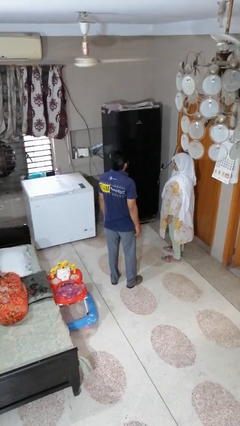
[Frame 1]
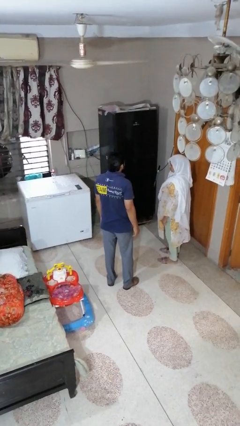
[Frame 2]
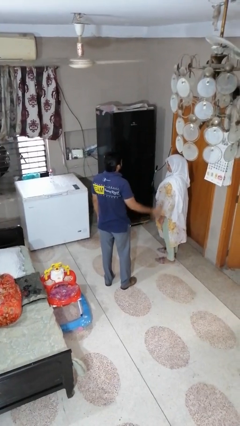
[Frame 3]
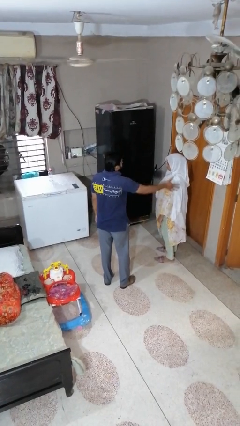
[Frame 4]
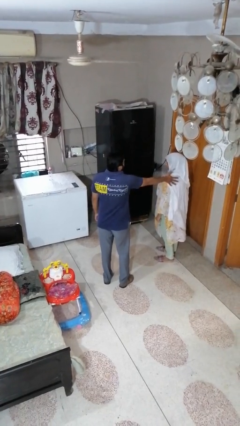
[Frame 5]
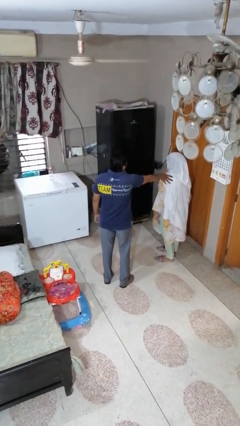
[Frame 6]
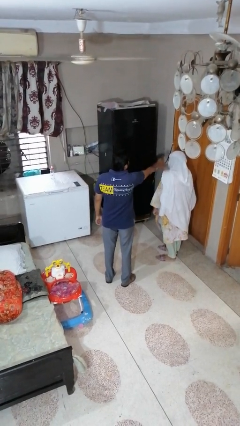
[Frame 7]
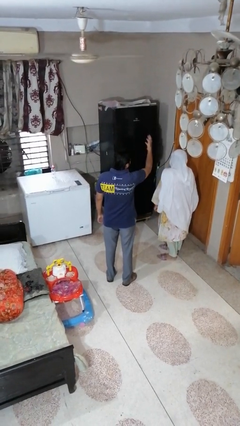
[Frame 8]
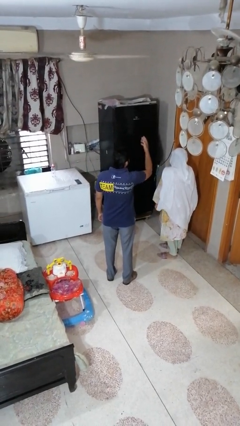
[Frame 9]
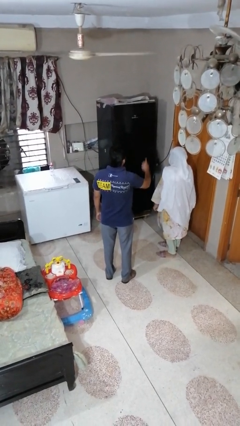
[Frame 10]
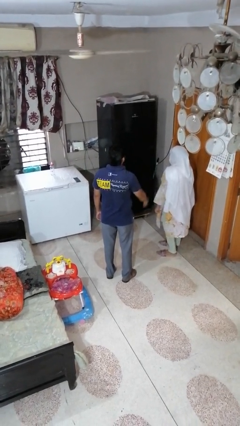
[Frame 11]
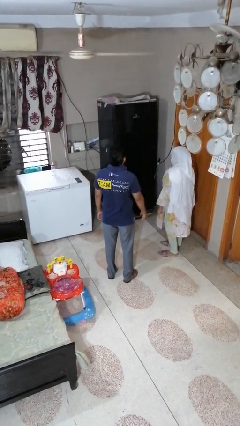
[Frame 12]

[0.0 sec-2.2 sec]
person shoves person

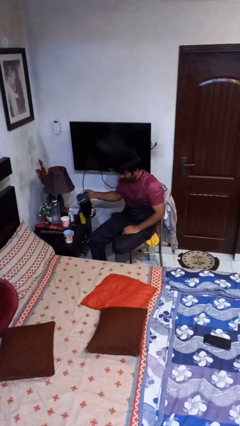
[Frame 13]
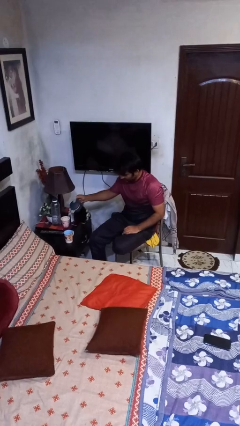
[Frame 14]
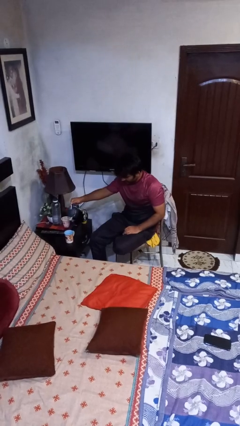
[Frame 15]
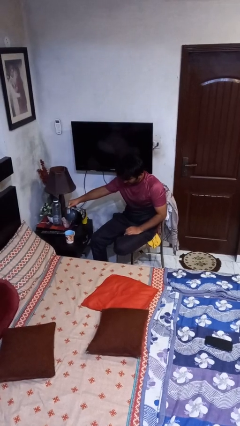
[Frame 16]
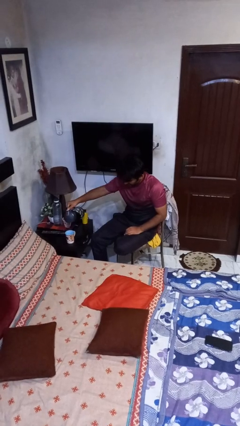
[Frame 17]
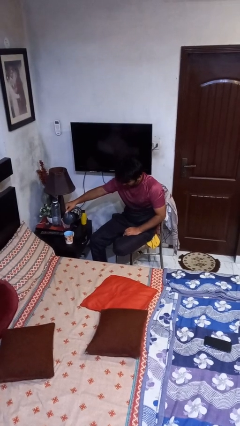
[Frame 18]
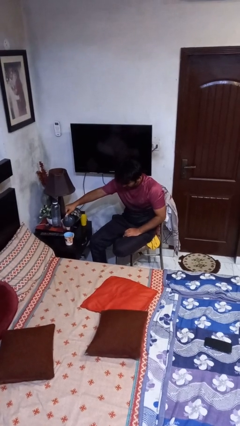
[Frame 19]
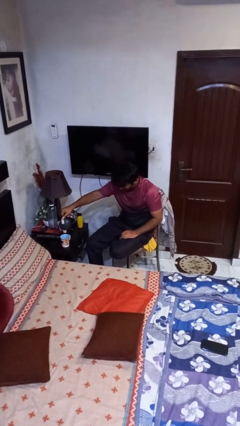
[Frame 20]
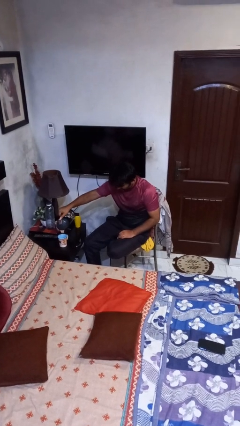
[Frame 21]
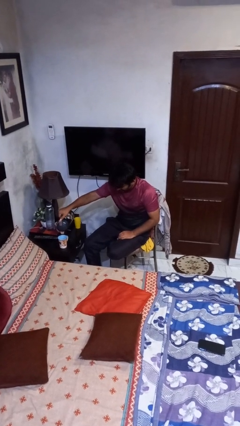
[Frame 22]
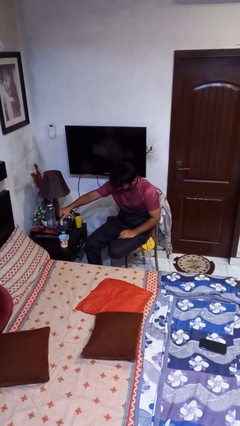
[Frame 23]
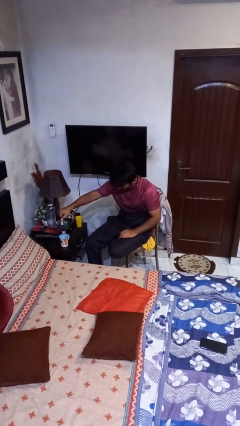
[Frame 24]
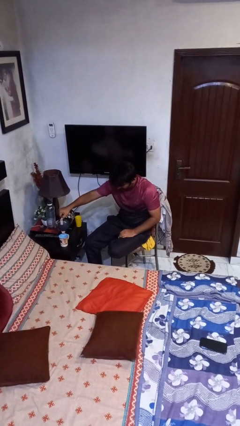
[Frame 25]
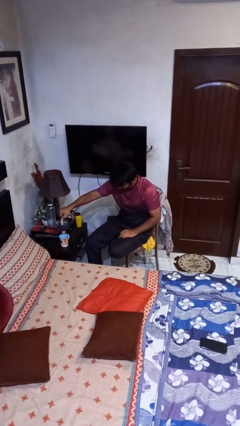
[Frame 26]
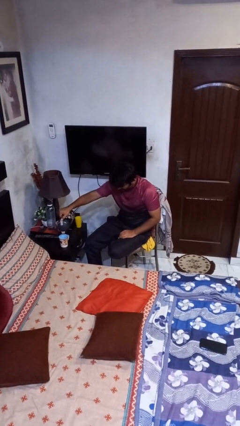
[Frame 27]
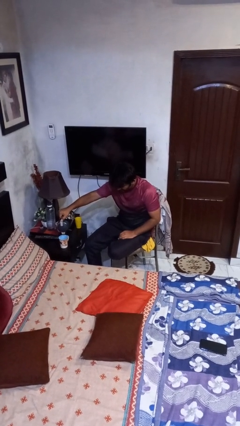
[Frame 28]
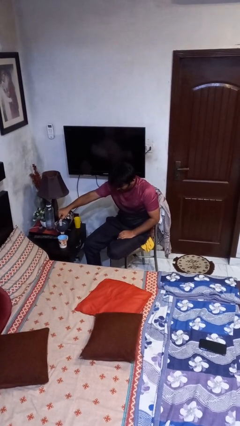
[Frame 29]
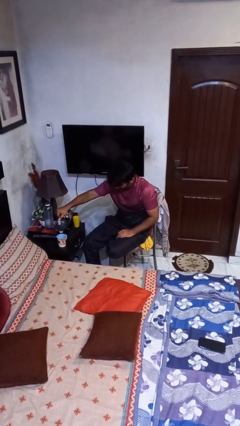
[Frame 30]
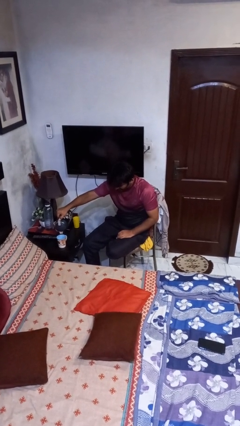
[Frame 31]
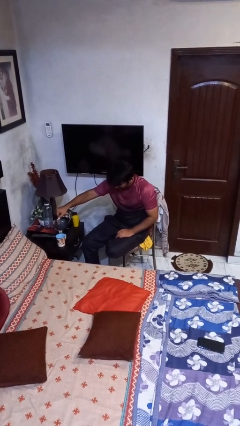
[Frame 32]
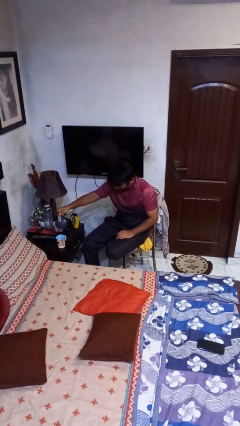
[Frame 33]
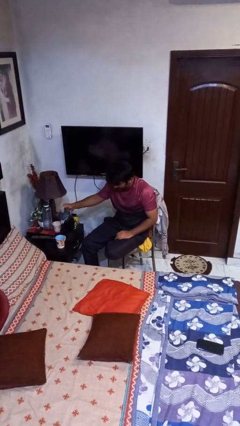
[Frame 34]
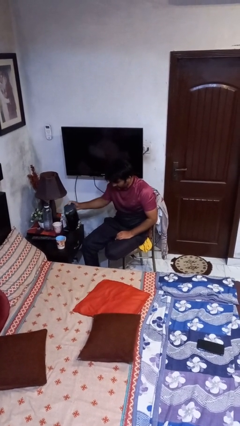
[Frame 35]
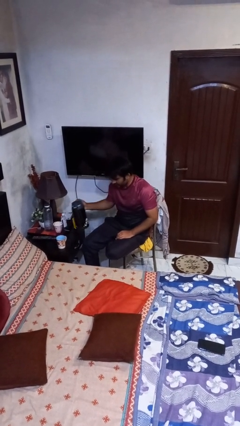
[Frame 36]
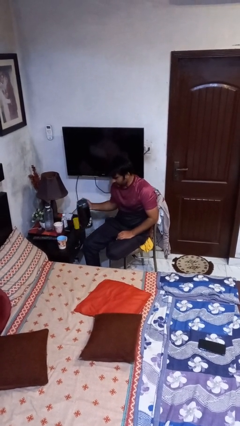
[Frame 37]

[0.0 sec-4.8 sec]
person pours coffee into mug

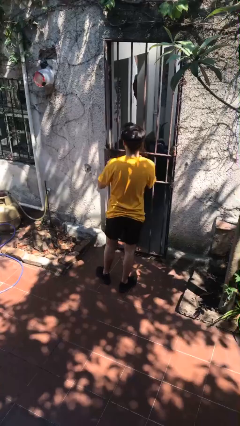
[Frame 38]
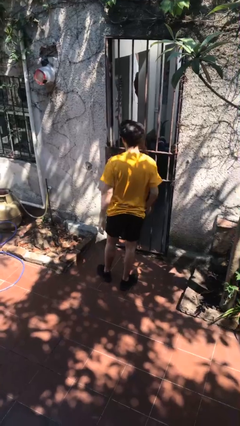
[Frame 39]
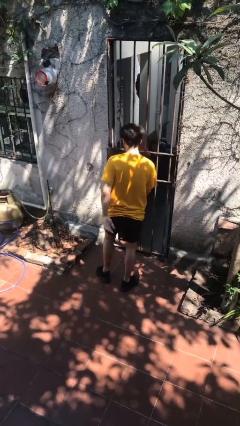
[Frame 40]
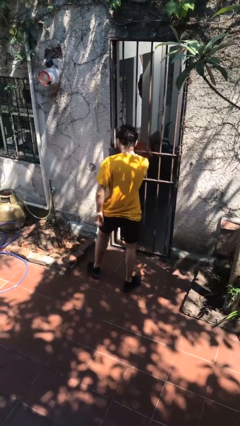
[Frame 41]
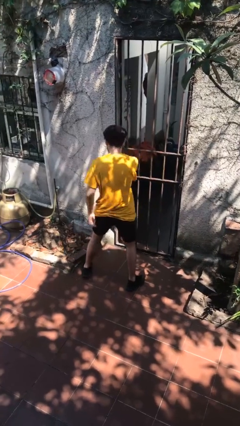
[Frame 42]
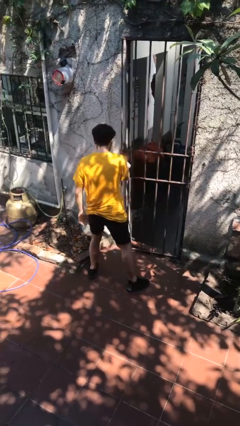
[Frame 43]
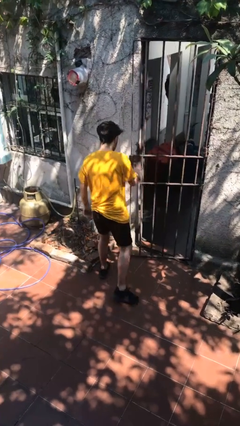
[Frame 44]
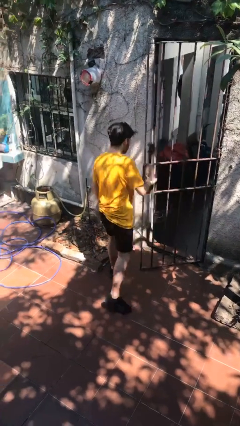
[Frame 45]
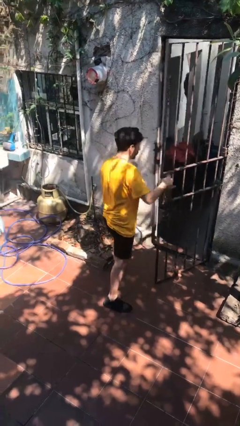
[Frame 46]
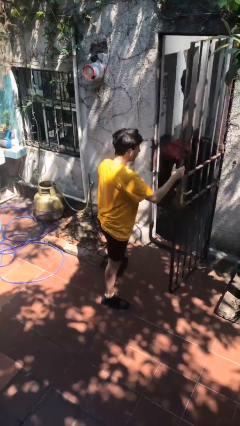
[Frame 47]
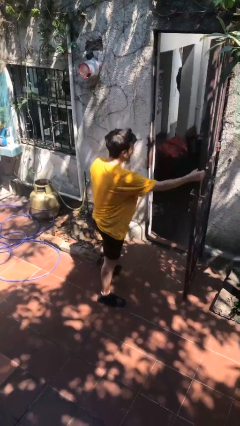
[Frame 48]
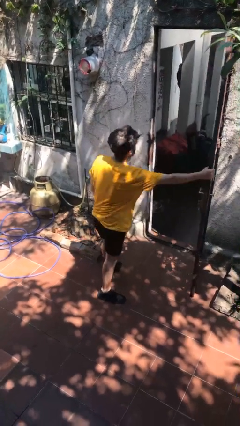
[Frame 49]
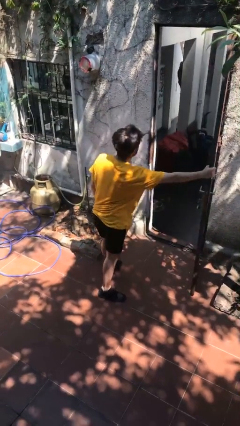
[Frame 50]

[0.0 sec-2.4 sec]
person opens facility door

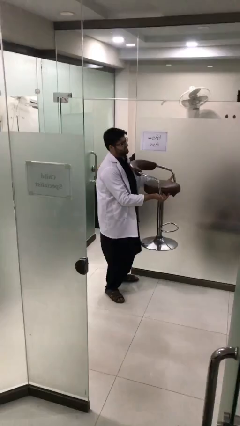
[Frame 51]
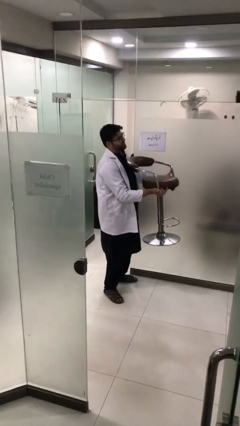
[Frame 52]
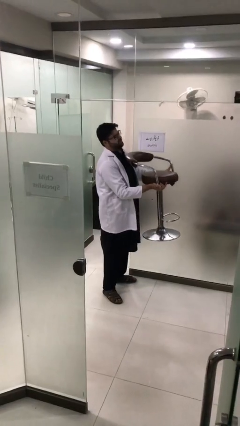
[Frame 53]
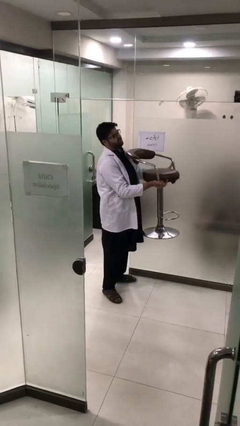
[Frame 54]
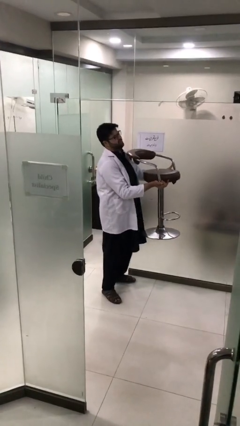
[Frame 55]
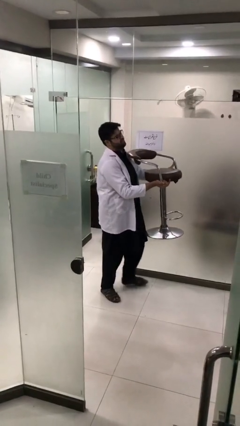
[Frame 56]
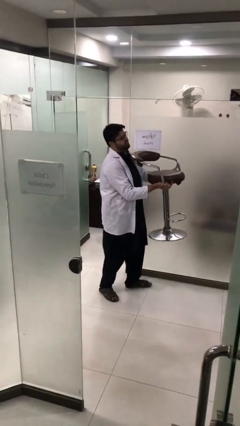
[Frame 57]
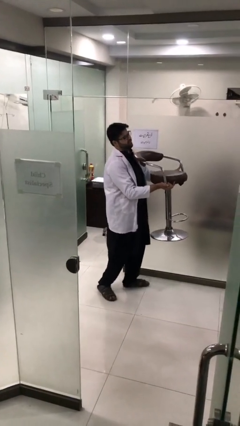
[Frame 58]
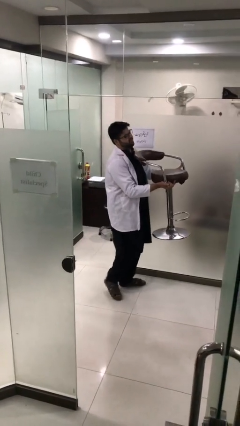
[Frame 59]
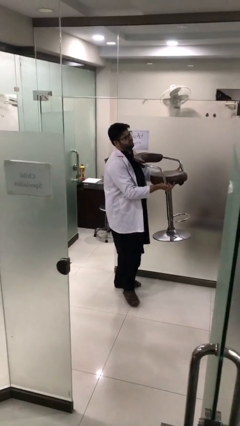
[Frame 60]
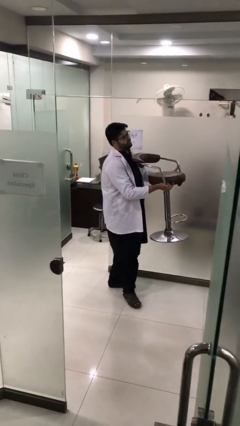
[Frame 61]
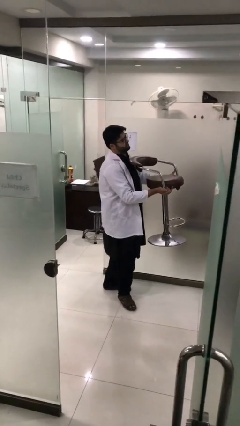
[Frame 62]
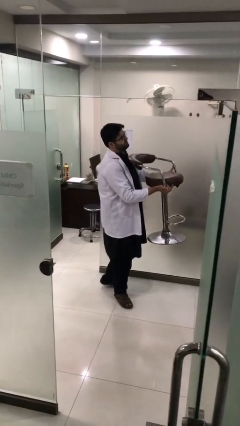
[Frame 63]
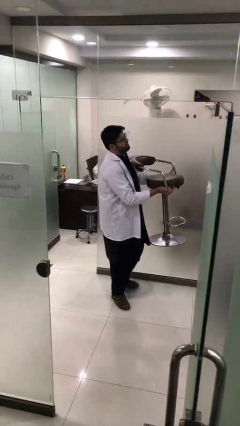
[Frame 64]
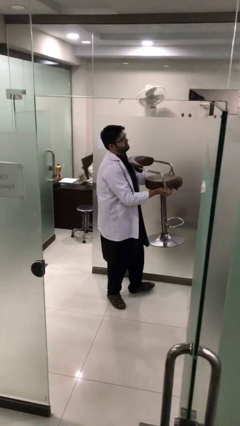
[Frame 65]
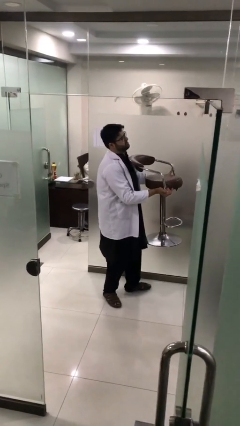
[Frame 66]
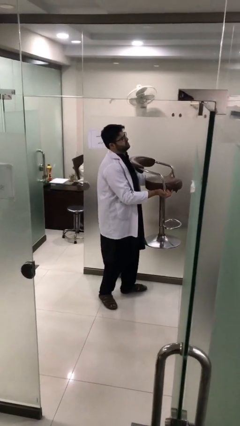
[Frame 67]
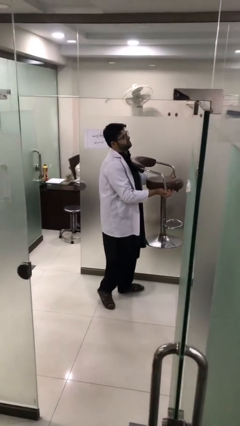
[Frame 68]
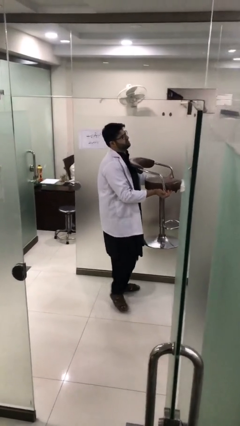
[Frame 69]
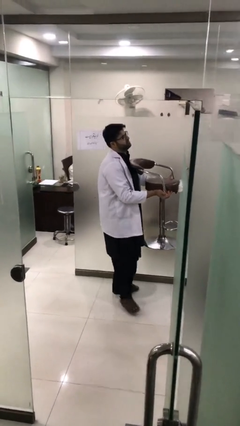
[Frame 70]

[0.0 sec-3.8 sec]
person carries heavy object

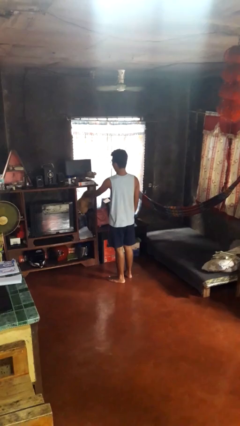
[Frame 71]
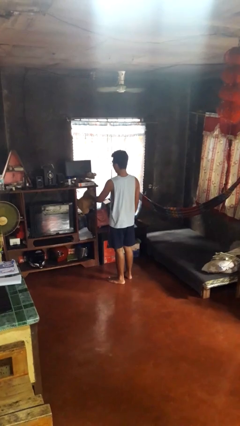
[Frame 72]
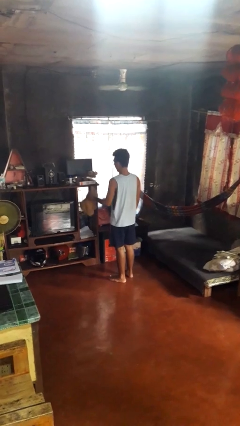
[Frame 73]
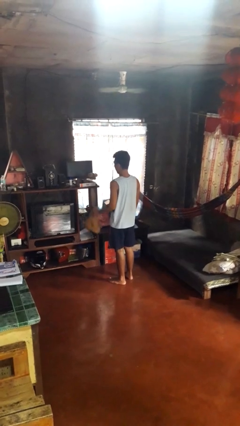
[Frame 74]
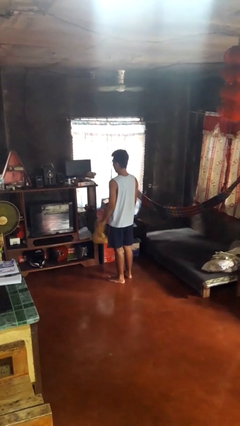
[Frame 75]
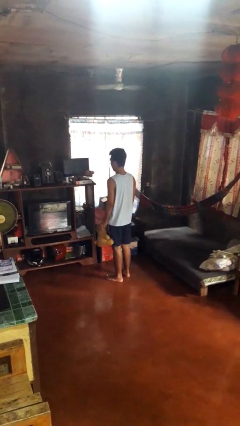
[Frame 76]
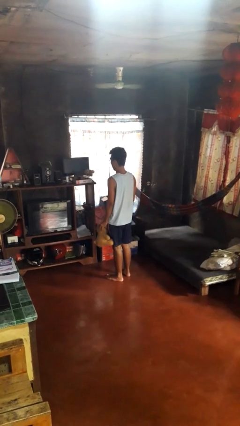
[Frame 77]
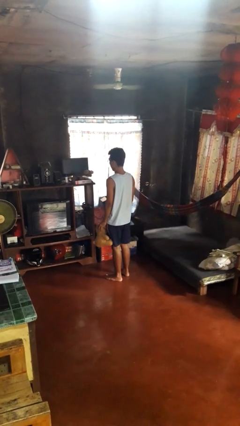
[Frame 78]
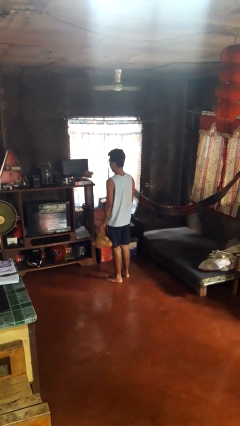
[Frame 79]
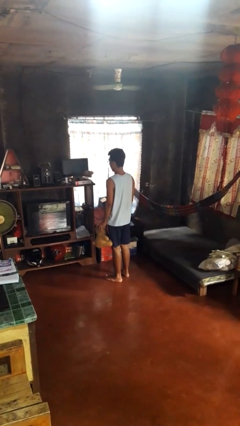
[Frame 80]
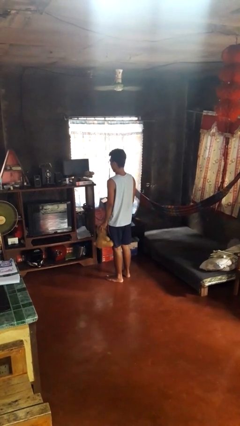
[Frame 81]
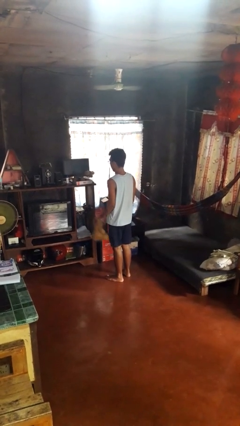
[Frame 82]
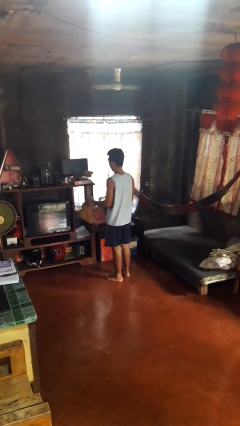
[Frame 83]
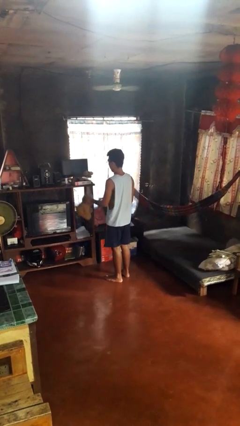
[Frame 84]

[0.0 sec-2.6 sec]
person picks up object from cabinet

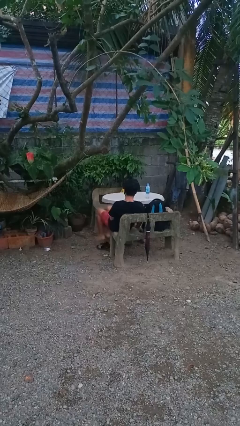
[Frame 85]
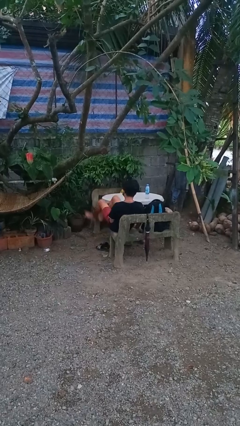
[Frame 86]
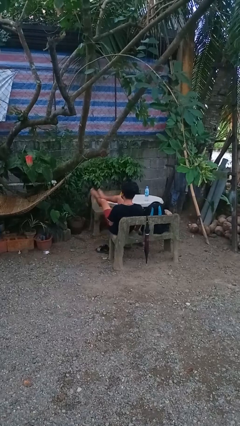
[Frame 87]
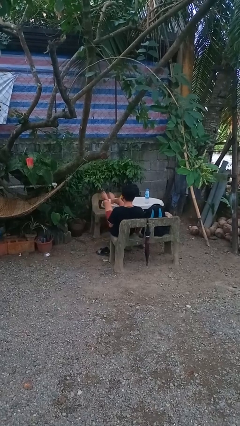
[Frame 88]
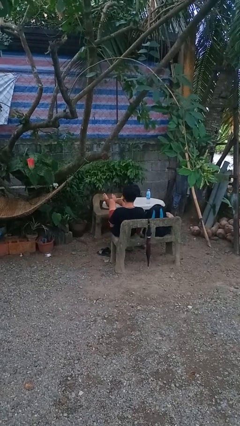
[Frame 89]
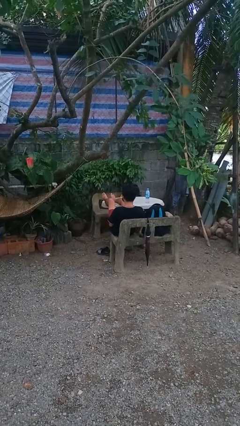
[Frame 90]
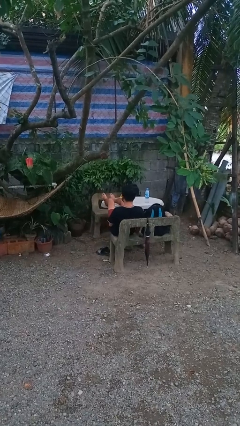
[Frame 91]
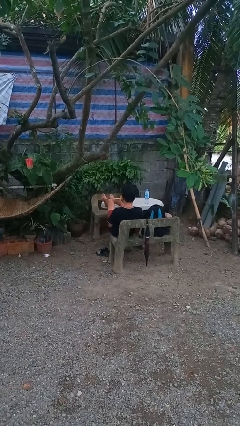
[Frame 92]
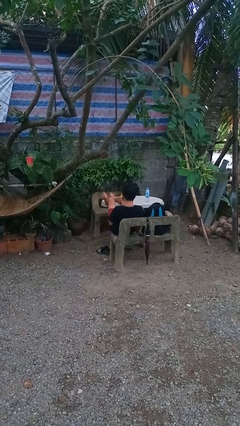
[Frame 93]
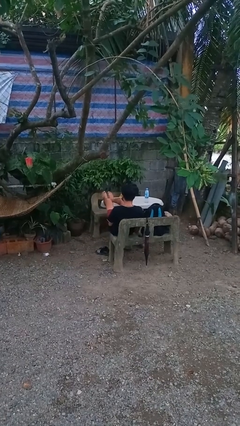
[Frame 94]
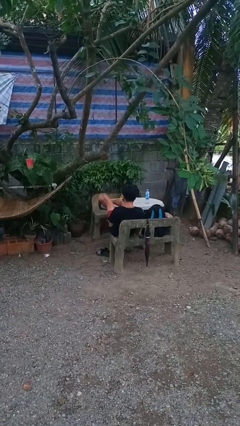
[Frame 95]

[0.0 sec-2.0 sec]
person puts feet up
